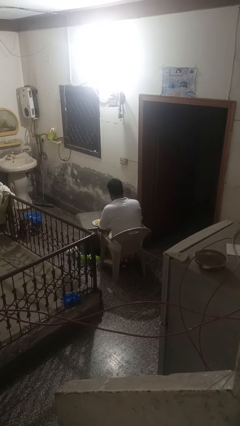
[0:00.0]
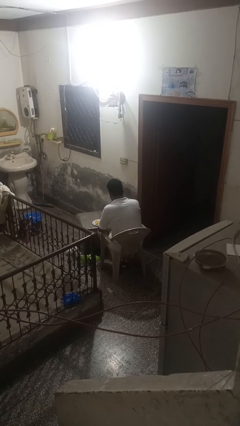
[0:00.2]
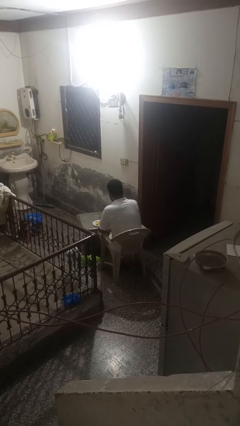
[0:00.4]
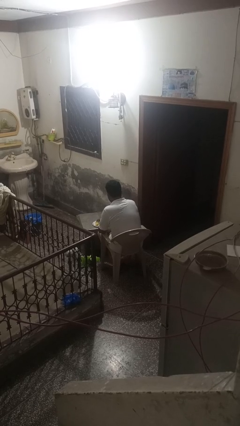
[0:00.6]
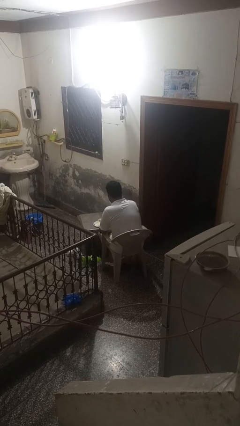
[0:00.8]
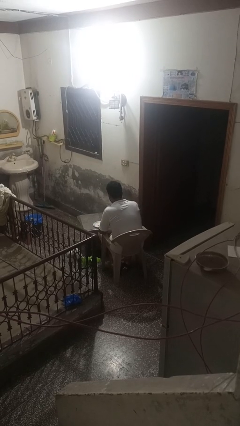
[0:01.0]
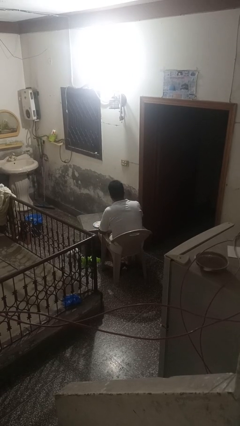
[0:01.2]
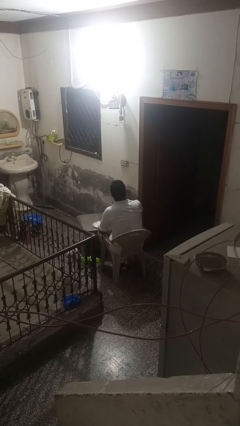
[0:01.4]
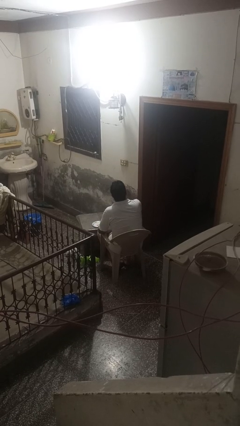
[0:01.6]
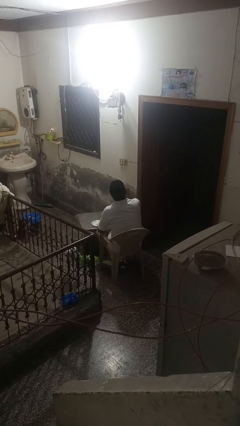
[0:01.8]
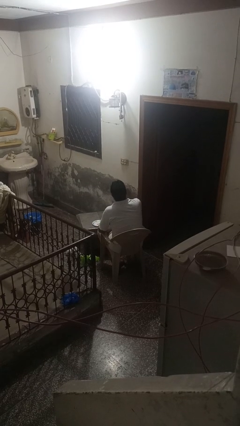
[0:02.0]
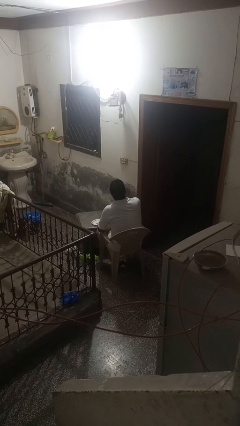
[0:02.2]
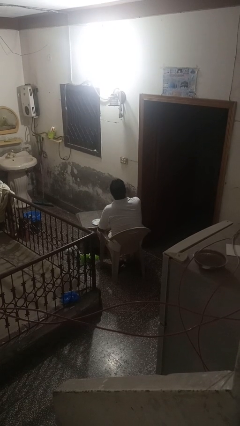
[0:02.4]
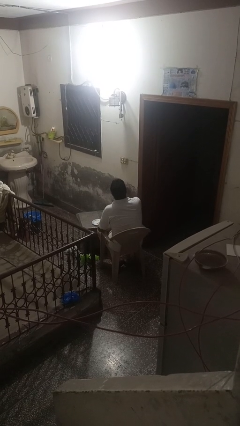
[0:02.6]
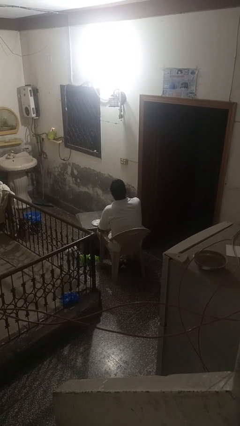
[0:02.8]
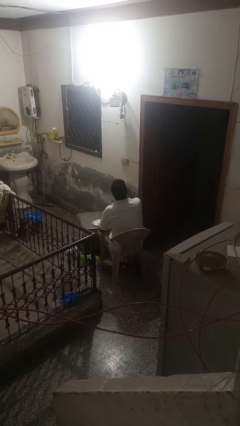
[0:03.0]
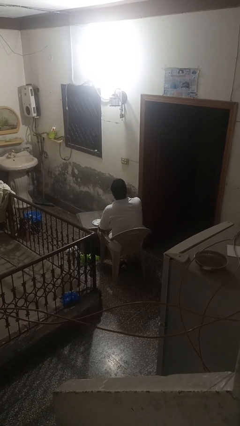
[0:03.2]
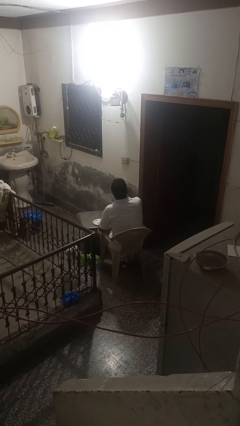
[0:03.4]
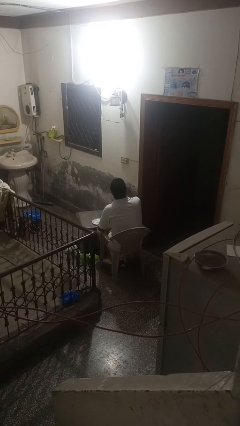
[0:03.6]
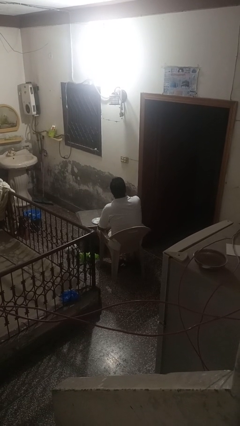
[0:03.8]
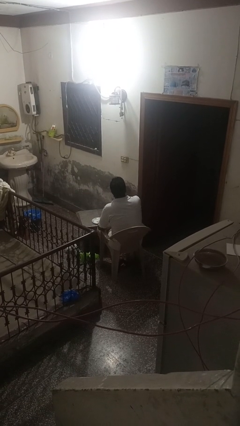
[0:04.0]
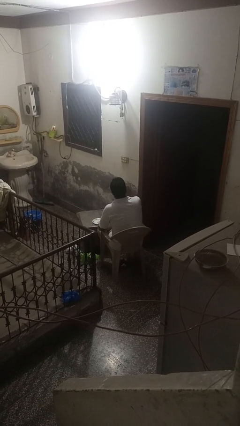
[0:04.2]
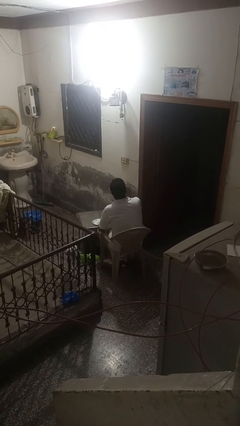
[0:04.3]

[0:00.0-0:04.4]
person eats with hands

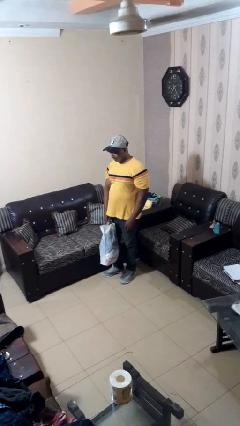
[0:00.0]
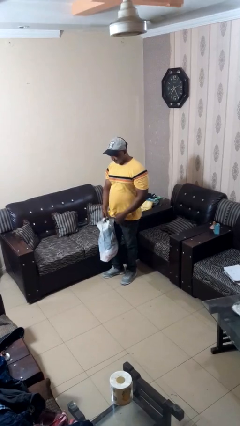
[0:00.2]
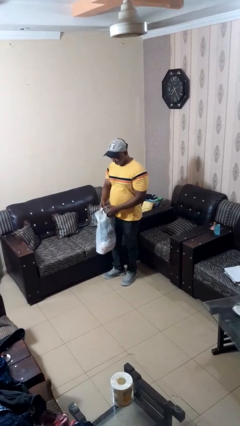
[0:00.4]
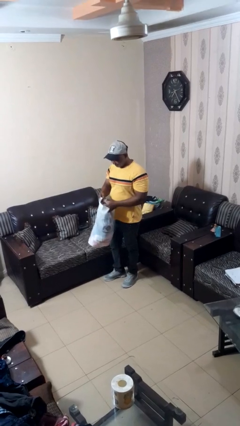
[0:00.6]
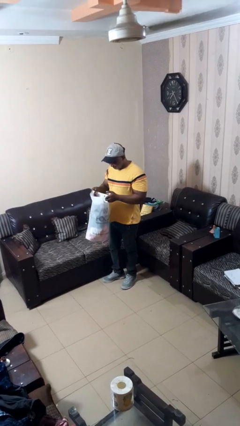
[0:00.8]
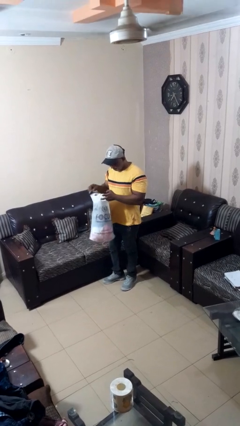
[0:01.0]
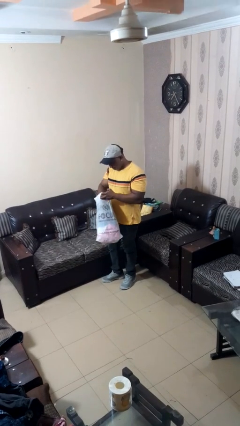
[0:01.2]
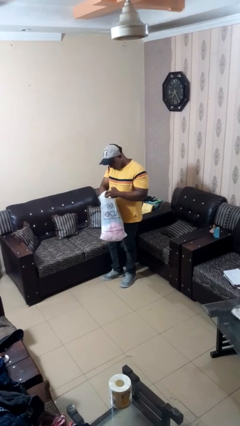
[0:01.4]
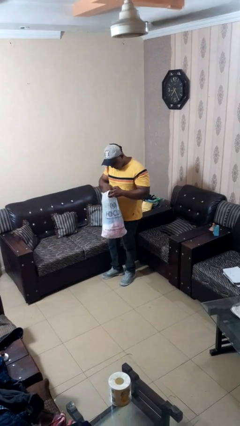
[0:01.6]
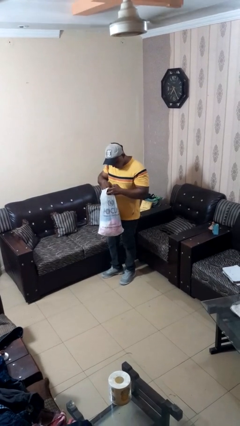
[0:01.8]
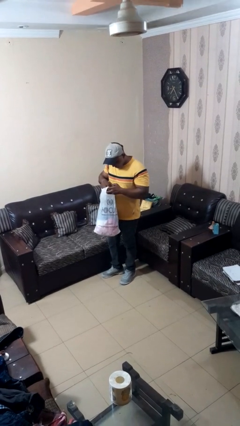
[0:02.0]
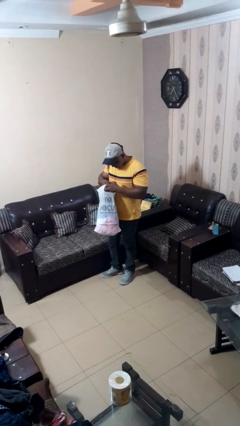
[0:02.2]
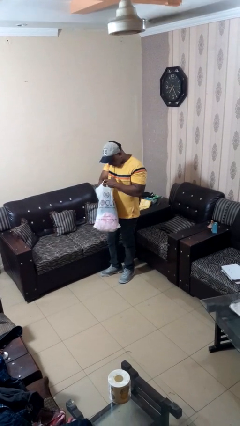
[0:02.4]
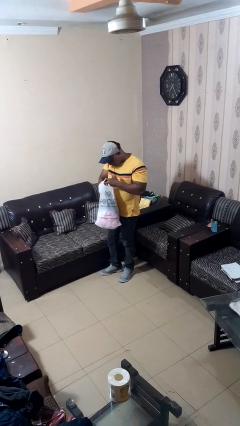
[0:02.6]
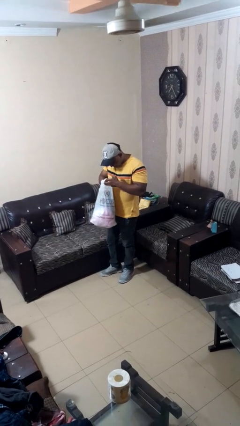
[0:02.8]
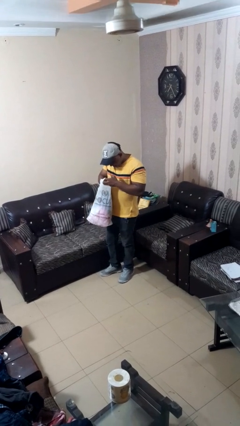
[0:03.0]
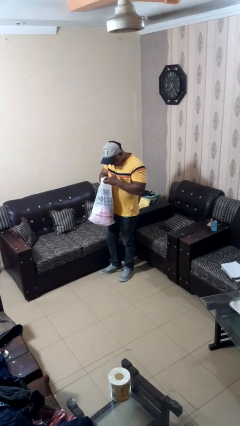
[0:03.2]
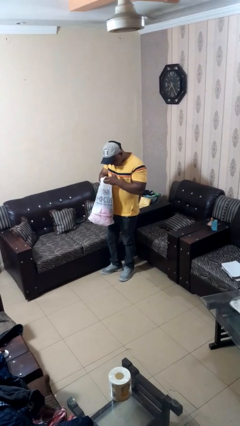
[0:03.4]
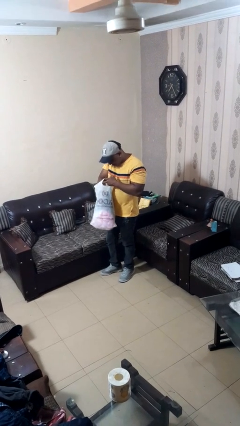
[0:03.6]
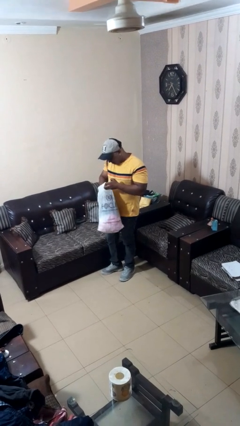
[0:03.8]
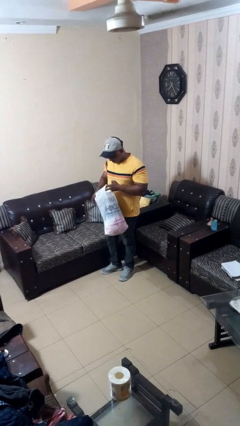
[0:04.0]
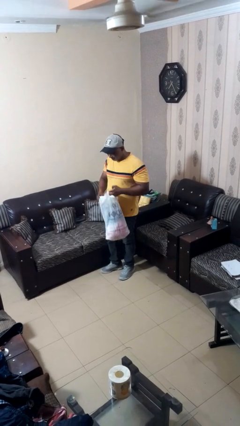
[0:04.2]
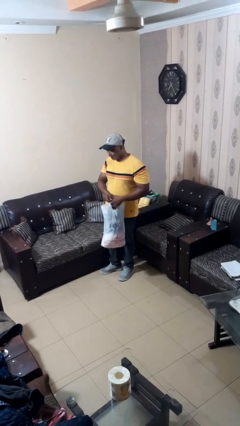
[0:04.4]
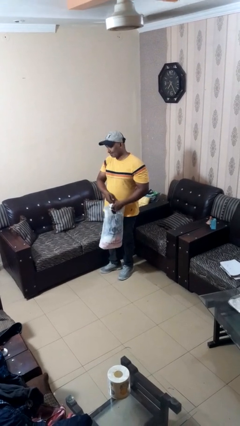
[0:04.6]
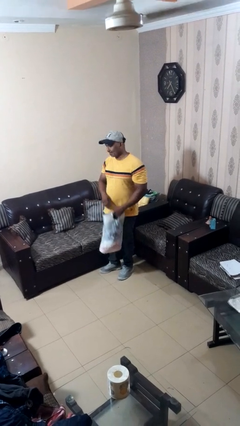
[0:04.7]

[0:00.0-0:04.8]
person searches in bag

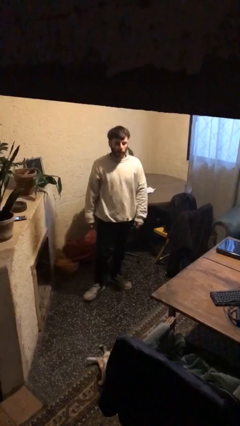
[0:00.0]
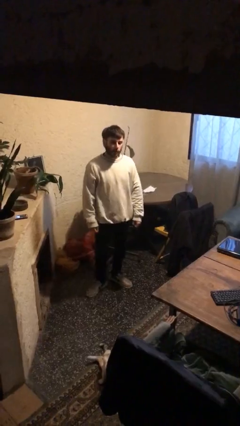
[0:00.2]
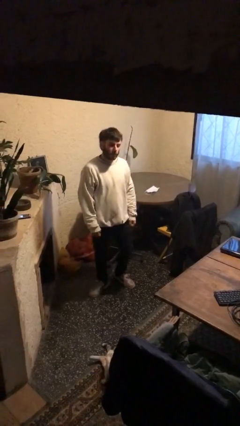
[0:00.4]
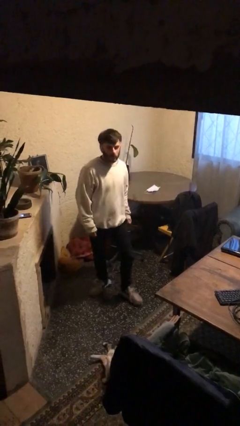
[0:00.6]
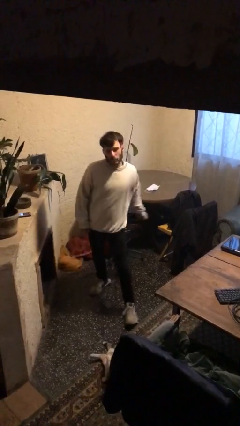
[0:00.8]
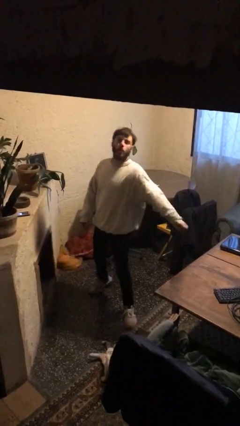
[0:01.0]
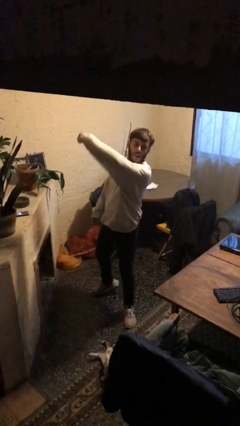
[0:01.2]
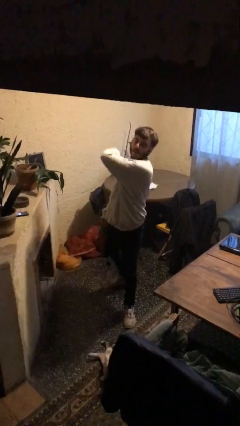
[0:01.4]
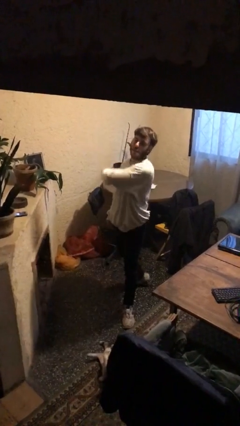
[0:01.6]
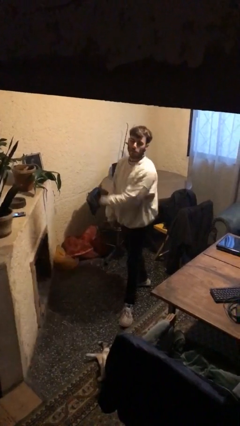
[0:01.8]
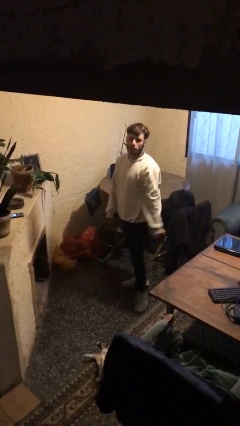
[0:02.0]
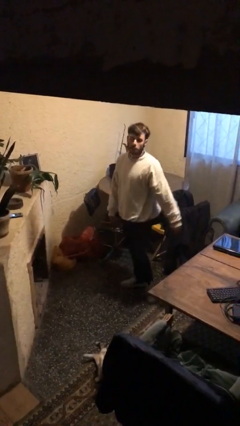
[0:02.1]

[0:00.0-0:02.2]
person punches

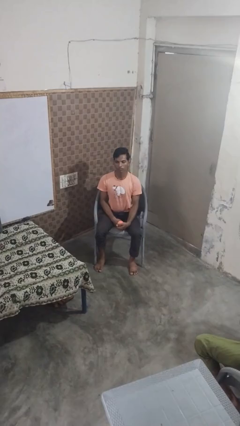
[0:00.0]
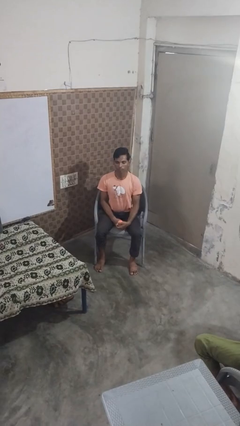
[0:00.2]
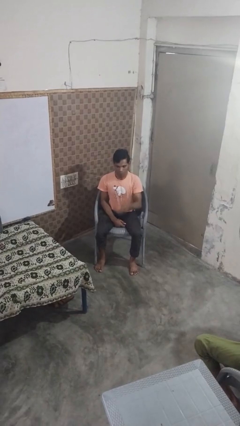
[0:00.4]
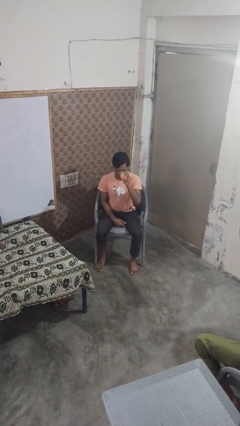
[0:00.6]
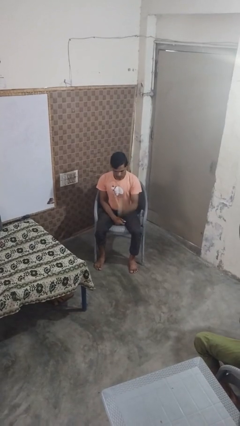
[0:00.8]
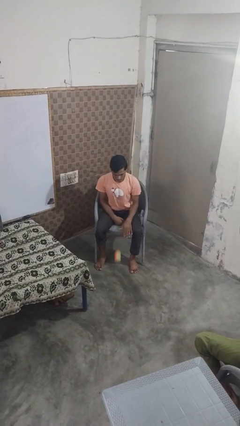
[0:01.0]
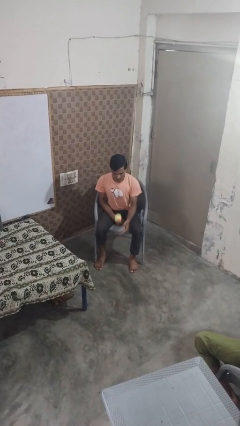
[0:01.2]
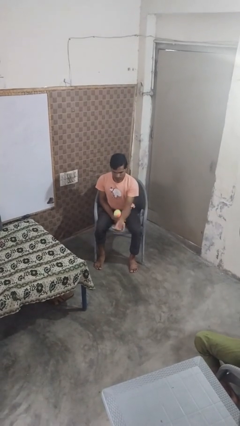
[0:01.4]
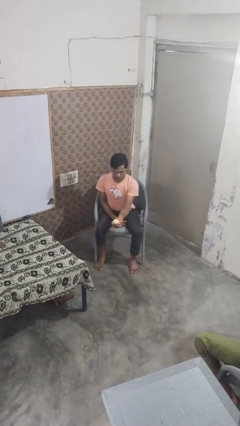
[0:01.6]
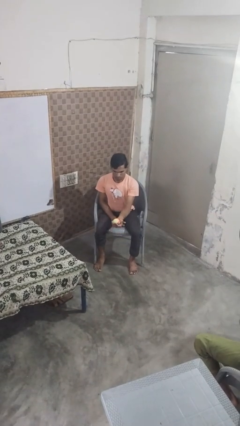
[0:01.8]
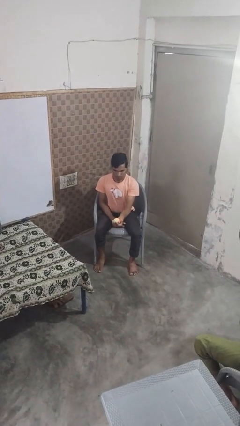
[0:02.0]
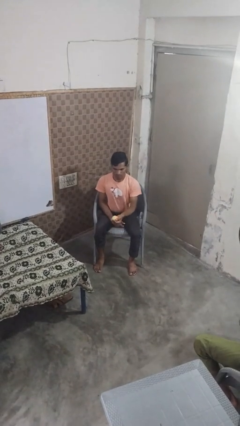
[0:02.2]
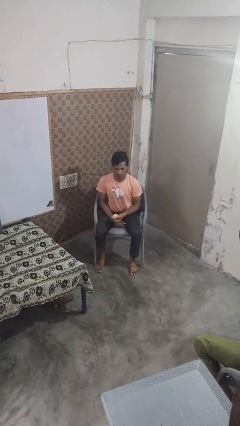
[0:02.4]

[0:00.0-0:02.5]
person bounces ball on floor

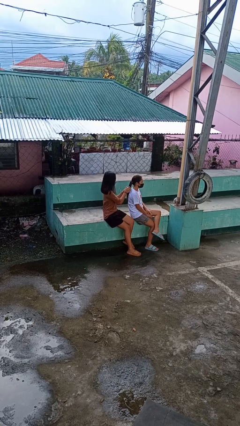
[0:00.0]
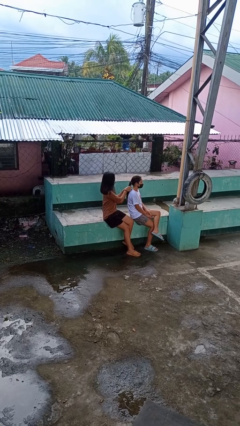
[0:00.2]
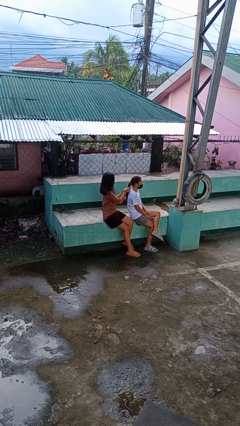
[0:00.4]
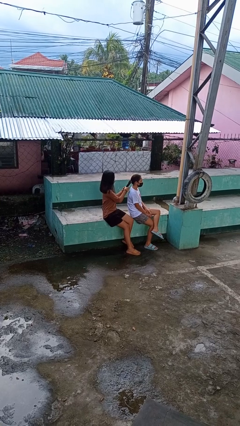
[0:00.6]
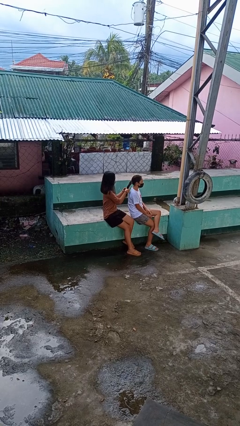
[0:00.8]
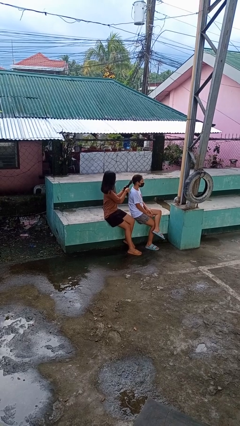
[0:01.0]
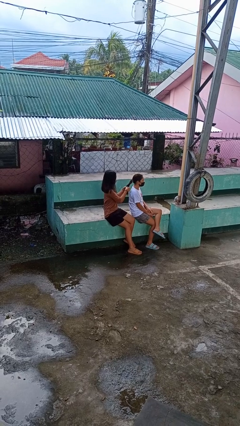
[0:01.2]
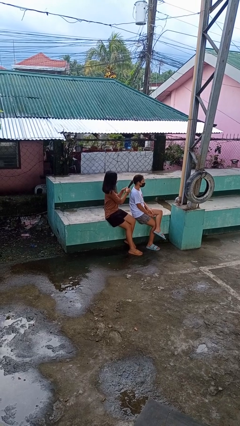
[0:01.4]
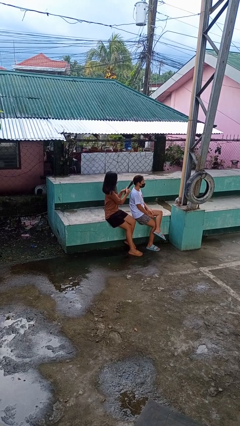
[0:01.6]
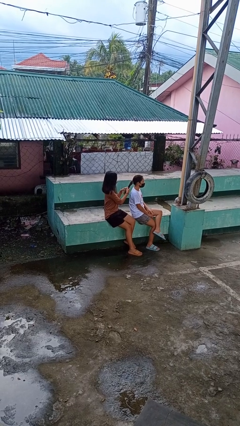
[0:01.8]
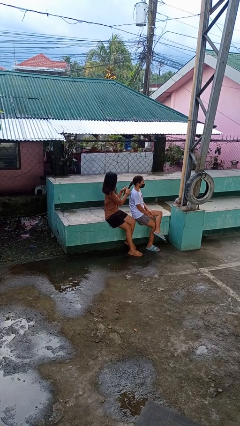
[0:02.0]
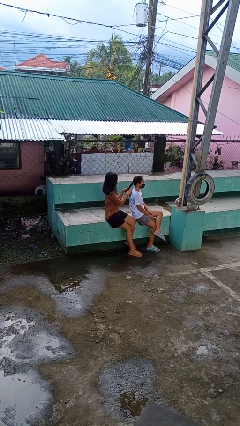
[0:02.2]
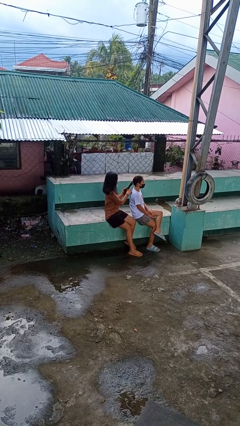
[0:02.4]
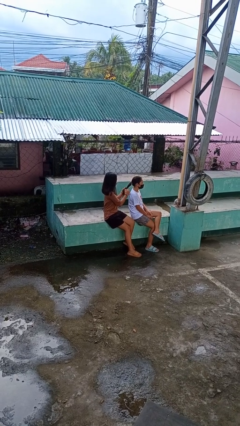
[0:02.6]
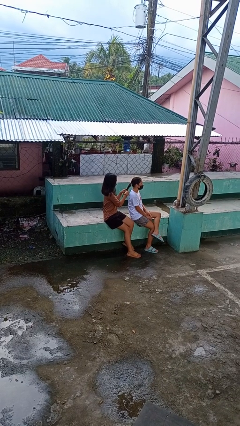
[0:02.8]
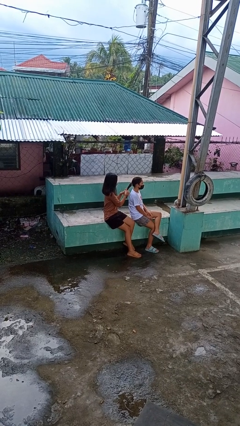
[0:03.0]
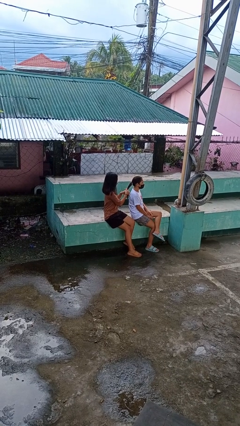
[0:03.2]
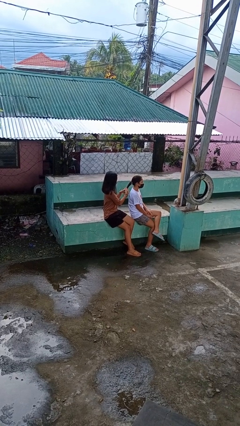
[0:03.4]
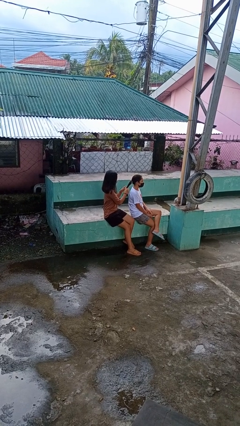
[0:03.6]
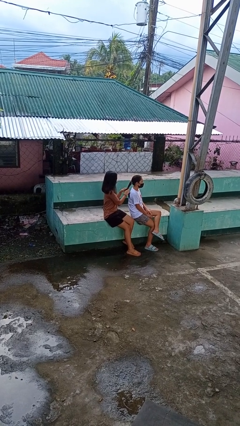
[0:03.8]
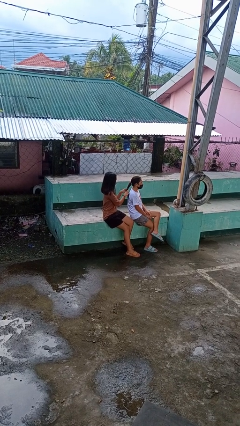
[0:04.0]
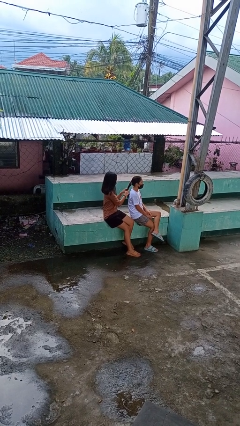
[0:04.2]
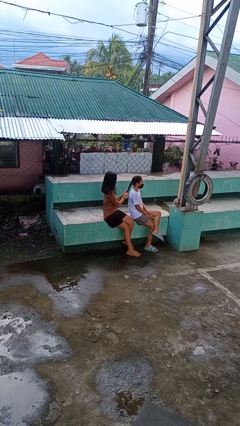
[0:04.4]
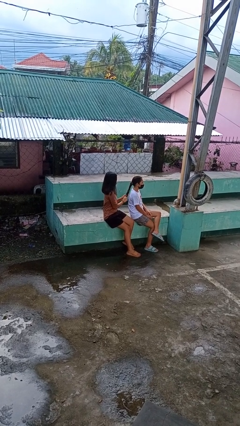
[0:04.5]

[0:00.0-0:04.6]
person braids hair of person
